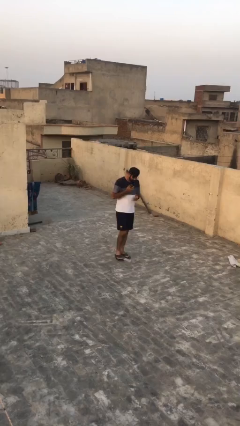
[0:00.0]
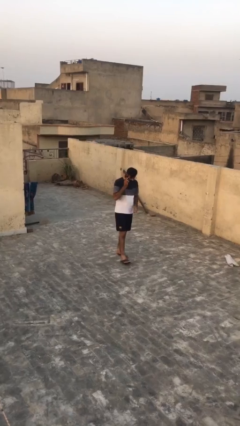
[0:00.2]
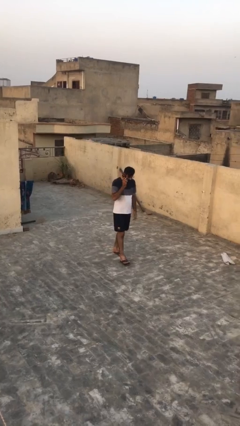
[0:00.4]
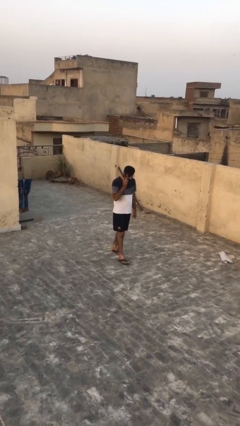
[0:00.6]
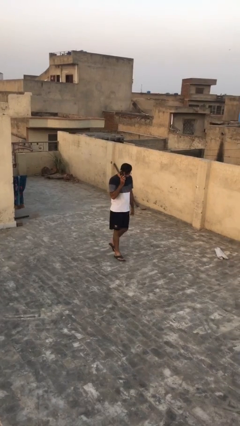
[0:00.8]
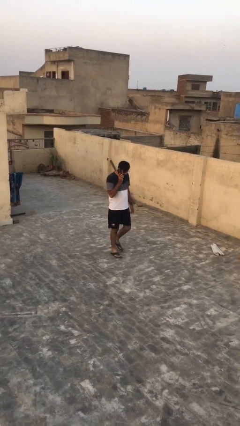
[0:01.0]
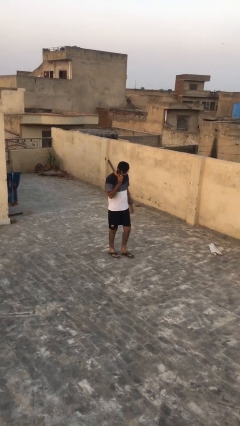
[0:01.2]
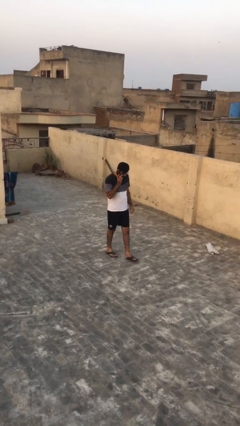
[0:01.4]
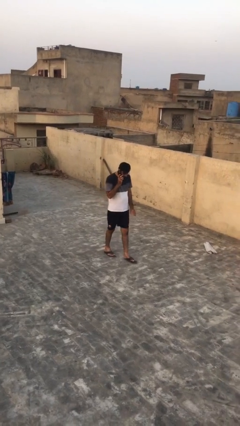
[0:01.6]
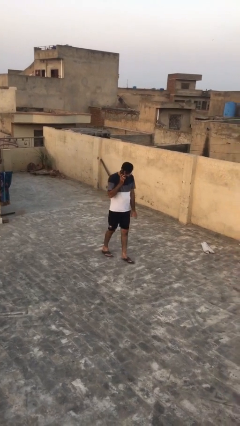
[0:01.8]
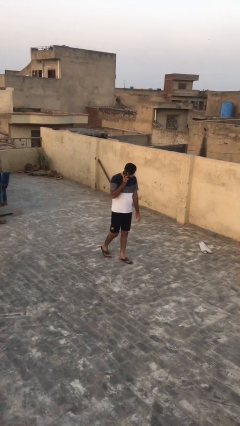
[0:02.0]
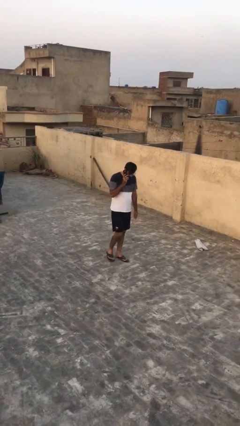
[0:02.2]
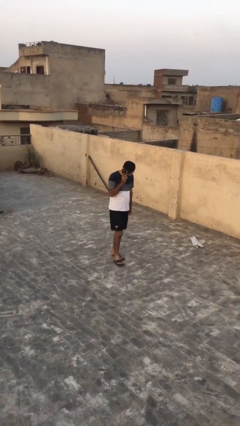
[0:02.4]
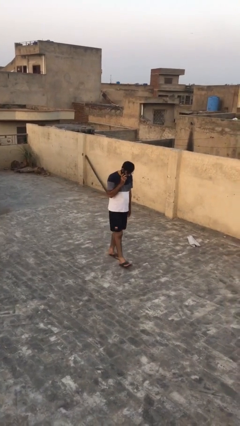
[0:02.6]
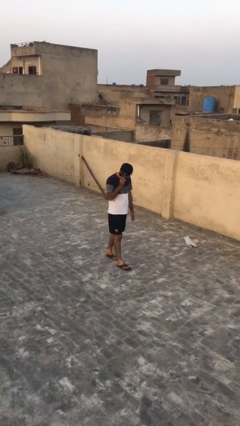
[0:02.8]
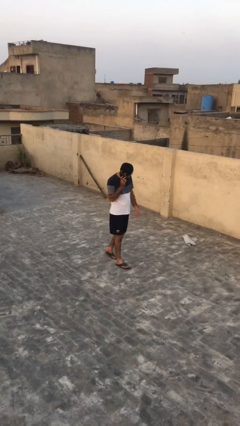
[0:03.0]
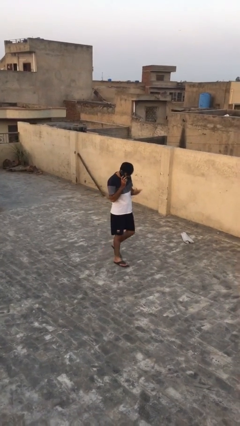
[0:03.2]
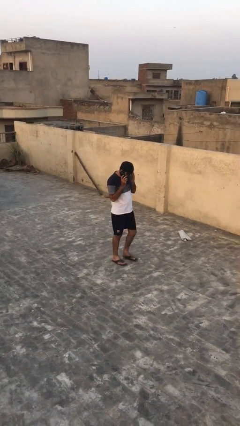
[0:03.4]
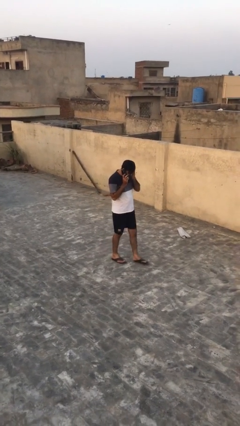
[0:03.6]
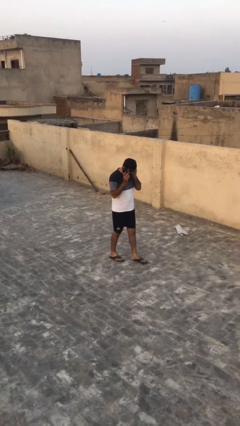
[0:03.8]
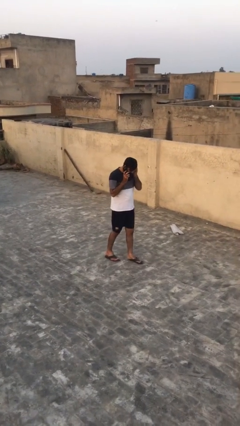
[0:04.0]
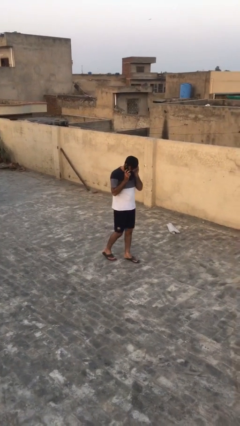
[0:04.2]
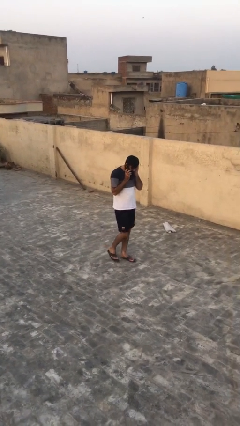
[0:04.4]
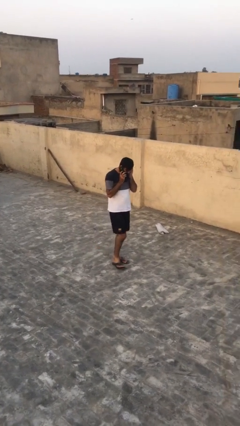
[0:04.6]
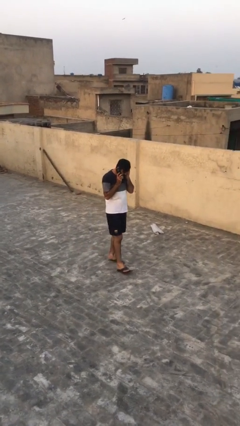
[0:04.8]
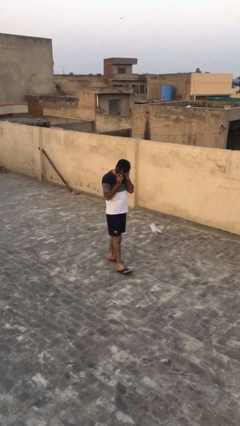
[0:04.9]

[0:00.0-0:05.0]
person talks on phone

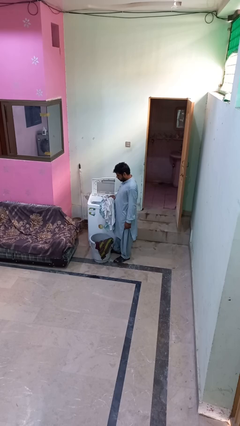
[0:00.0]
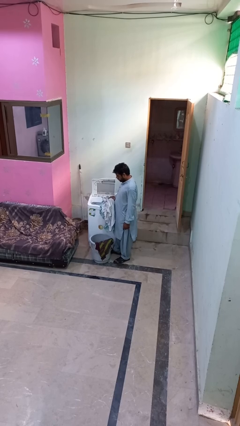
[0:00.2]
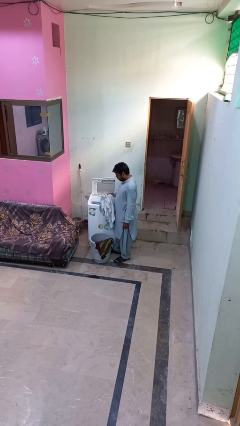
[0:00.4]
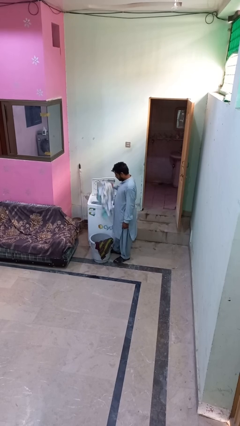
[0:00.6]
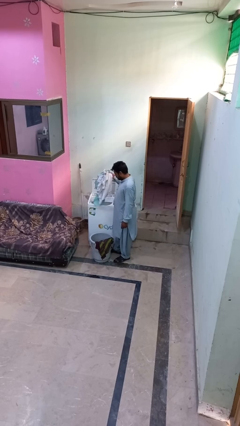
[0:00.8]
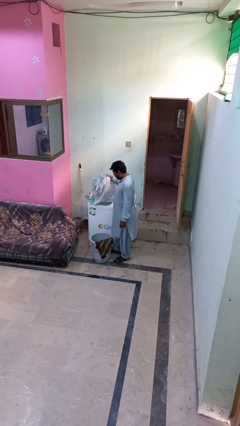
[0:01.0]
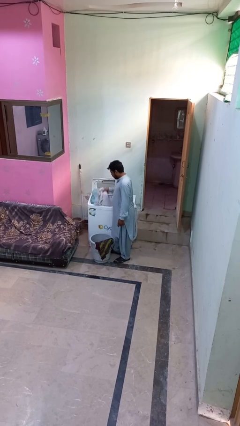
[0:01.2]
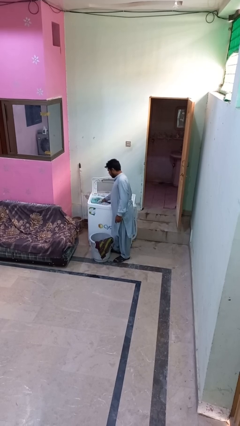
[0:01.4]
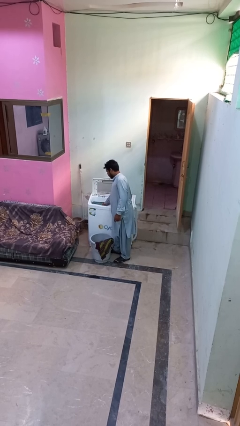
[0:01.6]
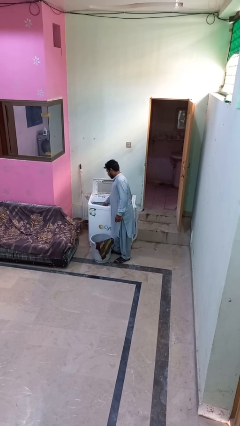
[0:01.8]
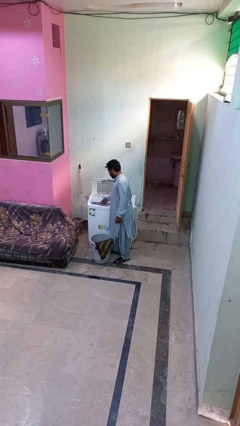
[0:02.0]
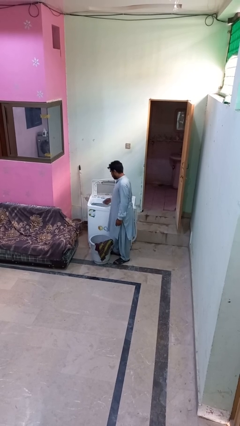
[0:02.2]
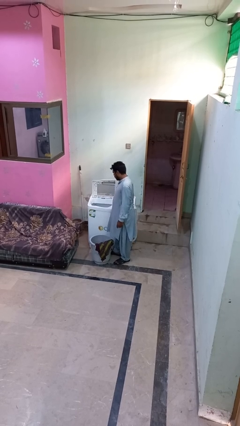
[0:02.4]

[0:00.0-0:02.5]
person loads clotheswasher

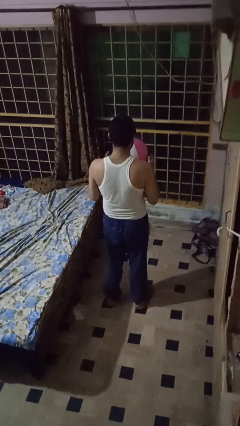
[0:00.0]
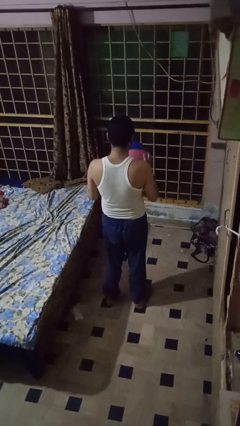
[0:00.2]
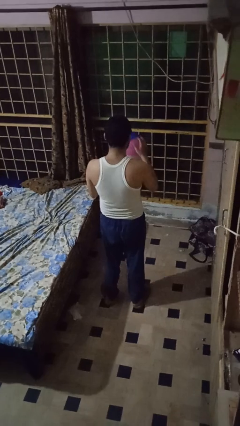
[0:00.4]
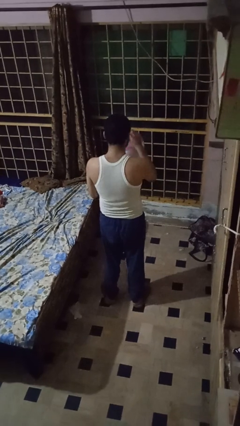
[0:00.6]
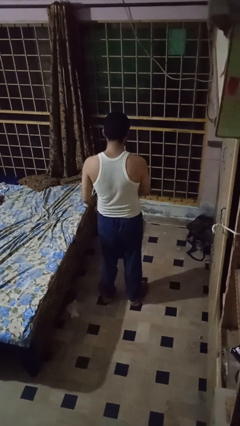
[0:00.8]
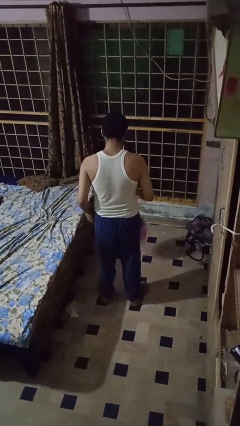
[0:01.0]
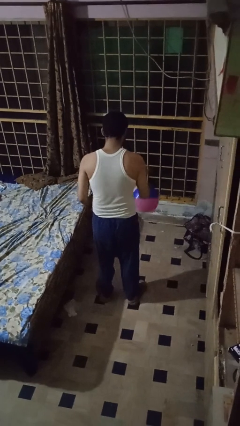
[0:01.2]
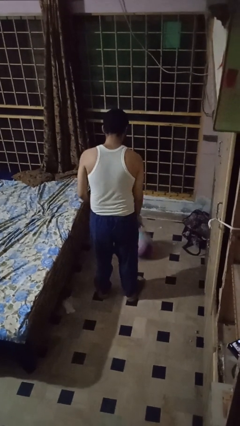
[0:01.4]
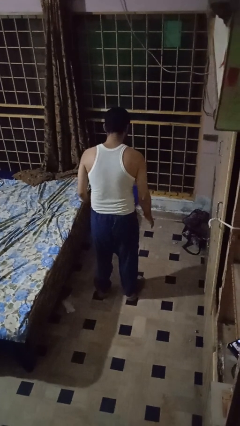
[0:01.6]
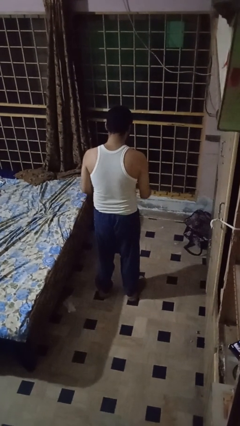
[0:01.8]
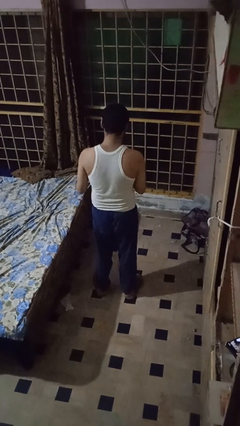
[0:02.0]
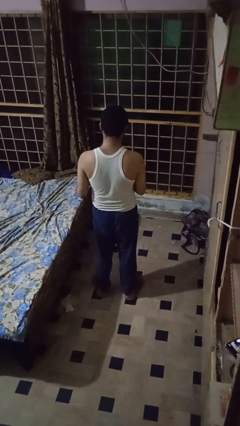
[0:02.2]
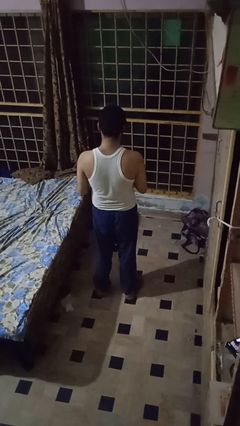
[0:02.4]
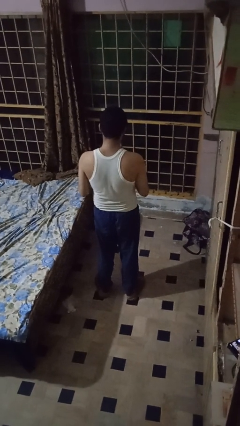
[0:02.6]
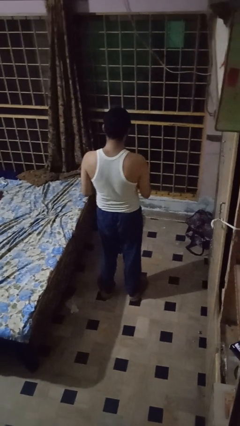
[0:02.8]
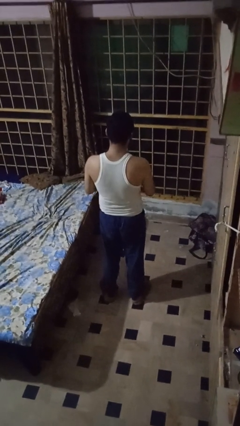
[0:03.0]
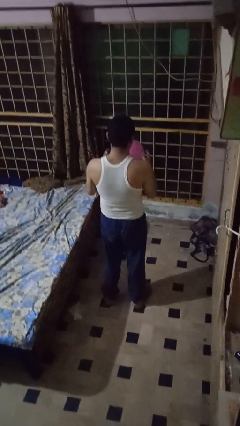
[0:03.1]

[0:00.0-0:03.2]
person bounces ball on floor

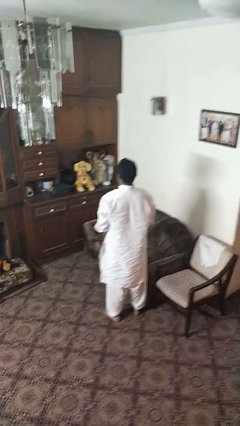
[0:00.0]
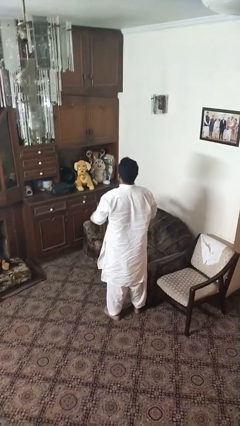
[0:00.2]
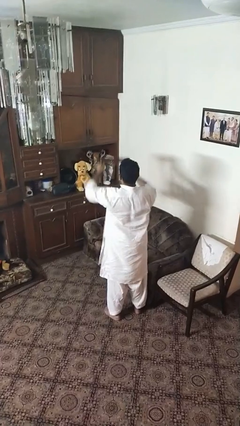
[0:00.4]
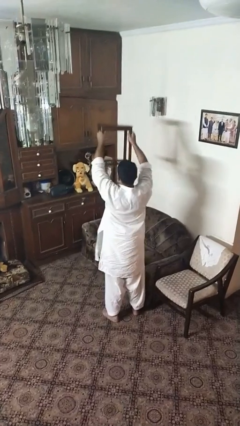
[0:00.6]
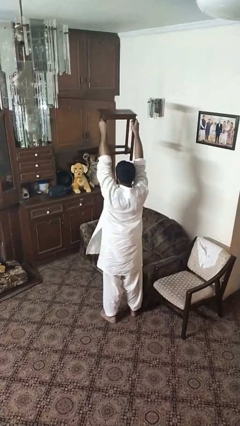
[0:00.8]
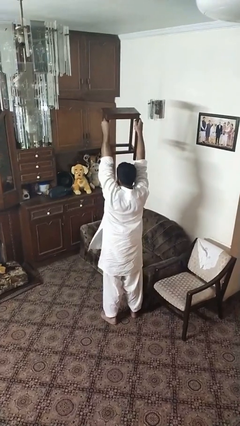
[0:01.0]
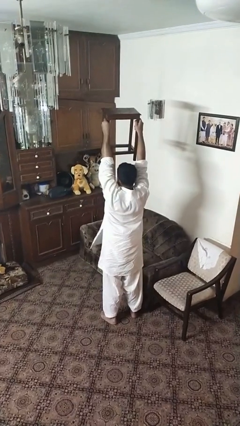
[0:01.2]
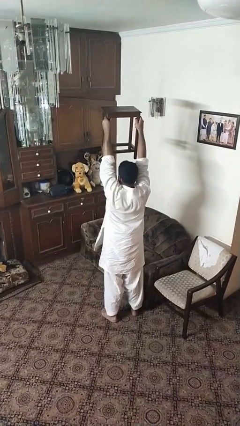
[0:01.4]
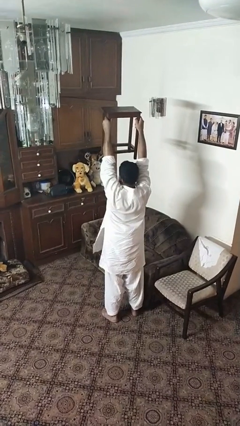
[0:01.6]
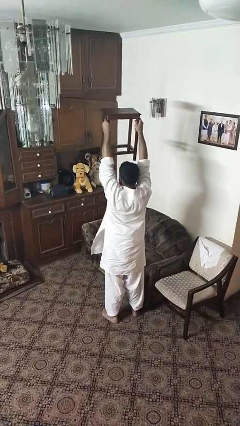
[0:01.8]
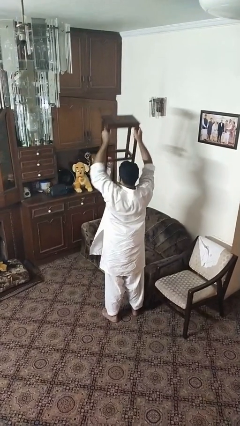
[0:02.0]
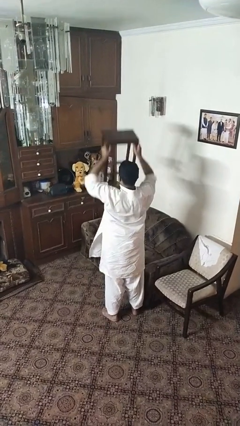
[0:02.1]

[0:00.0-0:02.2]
person holds object above head

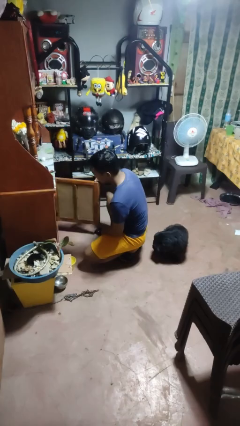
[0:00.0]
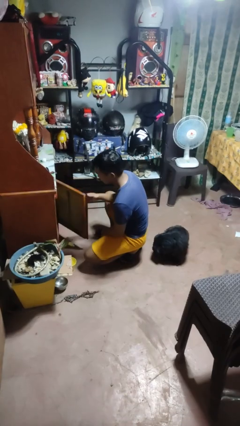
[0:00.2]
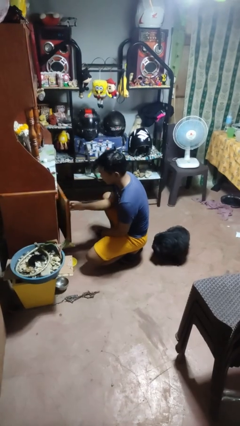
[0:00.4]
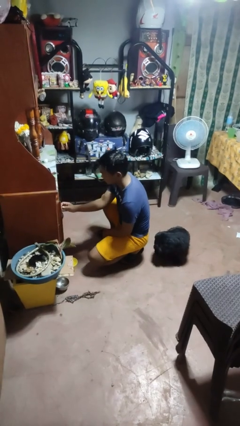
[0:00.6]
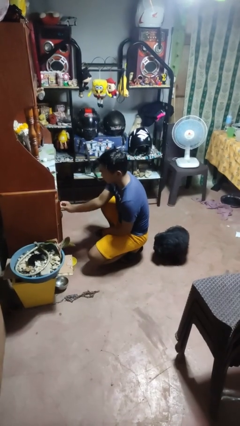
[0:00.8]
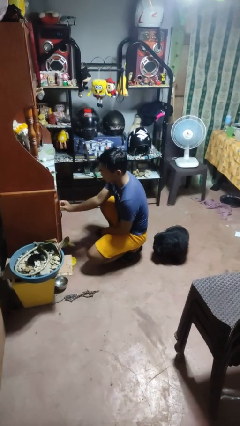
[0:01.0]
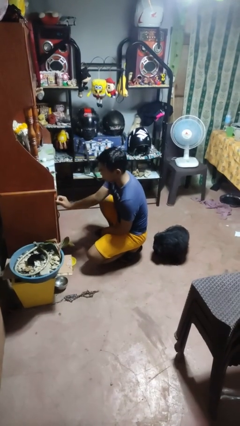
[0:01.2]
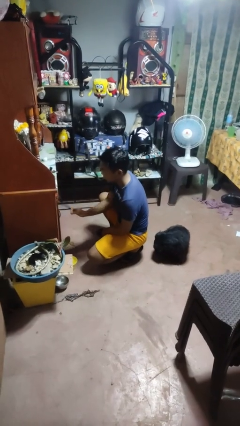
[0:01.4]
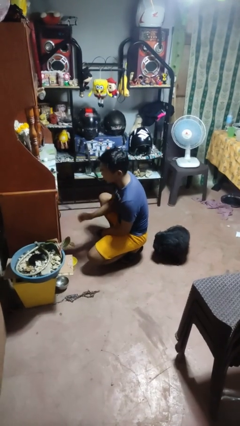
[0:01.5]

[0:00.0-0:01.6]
person closes cabinet

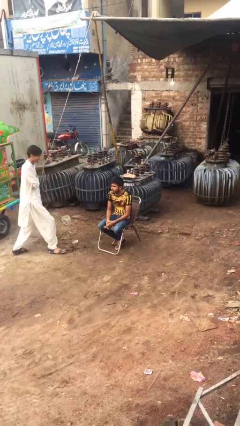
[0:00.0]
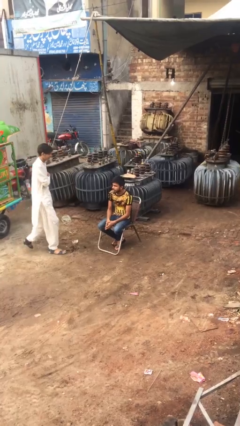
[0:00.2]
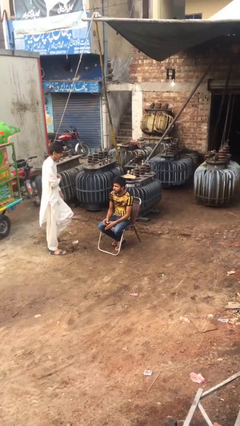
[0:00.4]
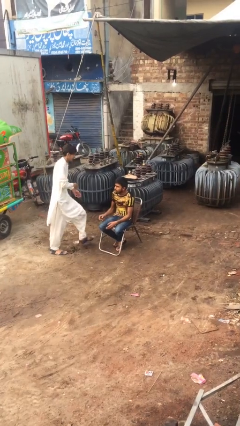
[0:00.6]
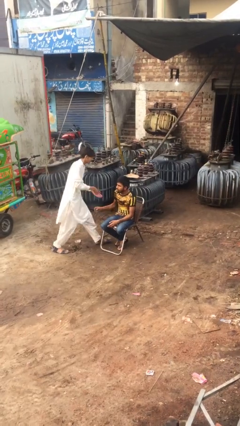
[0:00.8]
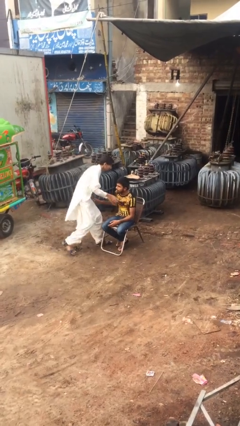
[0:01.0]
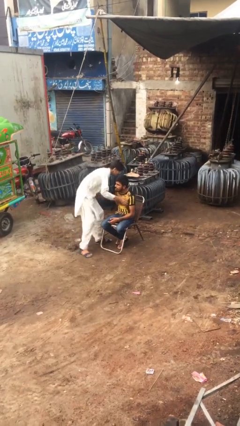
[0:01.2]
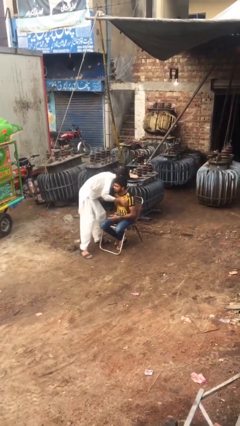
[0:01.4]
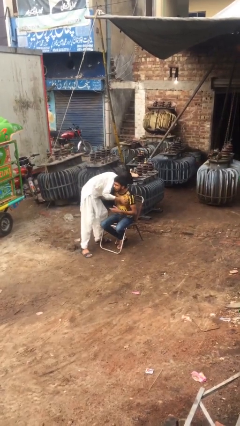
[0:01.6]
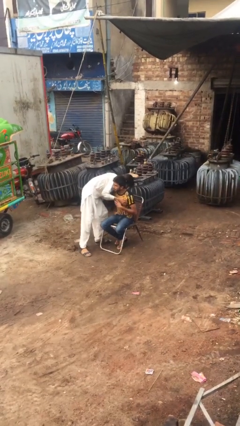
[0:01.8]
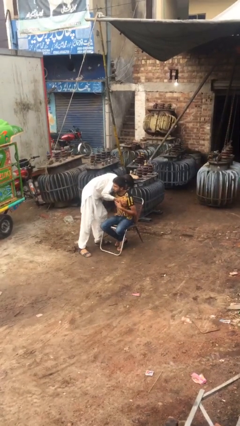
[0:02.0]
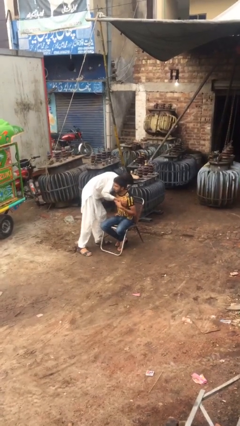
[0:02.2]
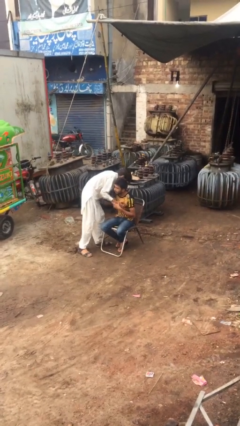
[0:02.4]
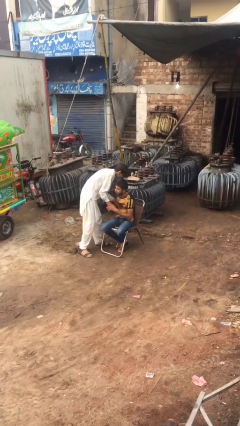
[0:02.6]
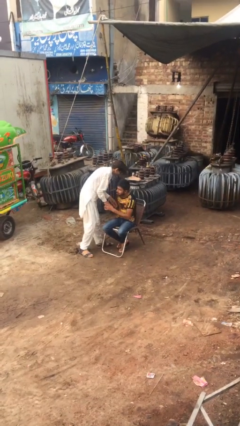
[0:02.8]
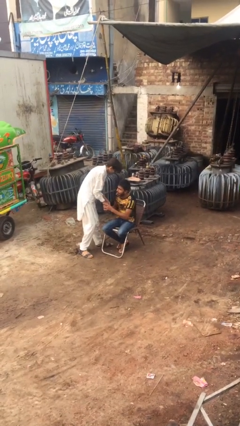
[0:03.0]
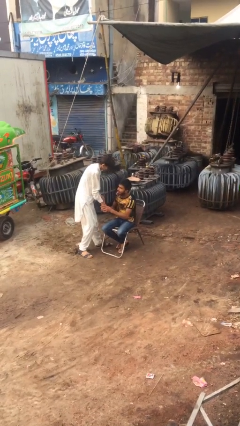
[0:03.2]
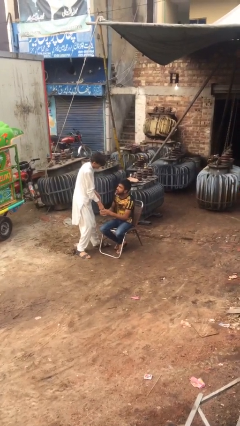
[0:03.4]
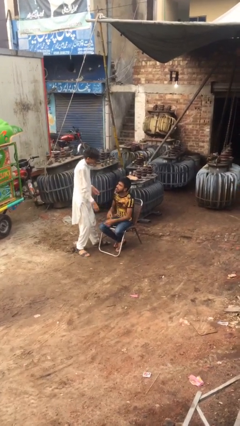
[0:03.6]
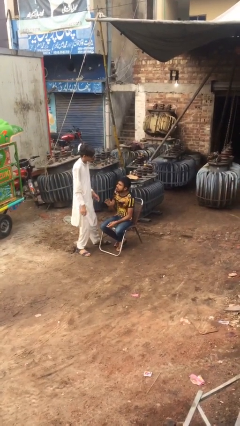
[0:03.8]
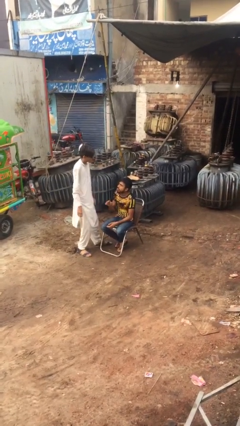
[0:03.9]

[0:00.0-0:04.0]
person embraces person
